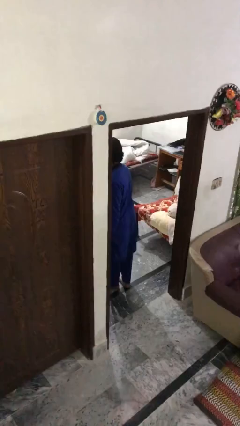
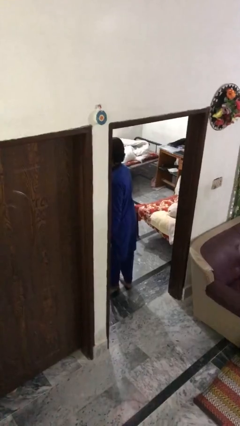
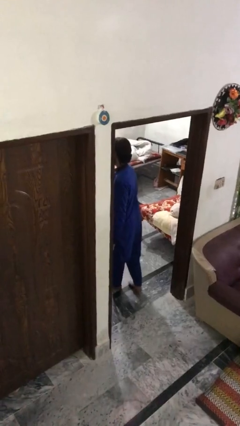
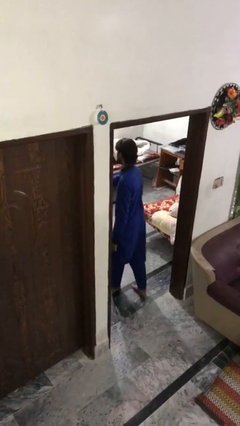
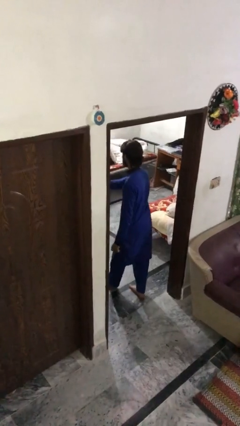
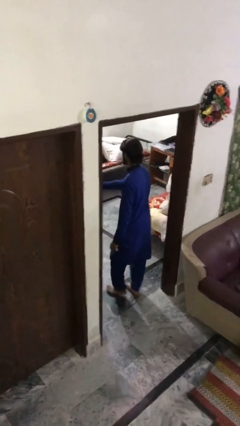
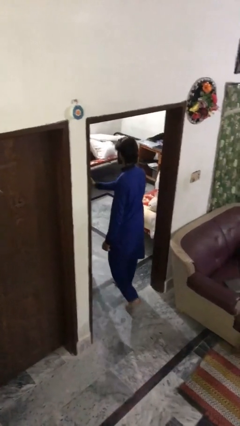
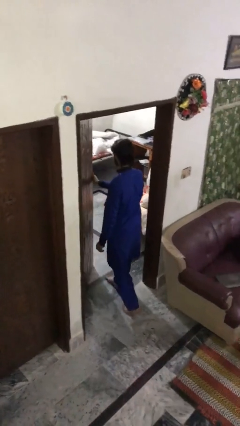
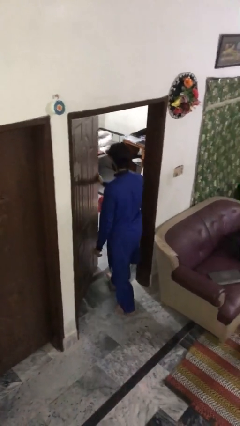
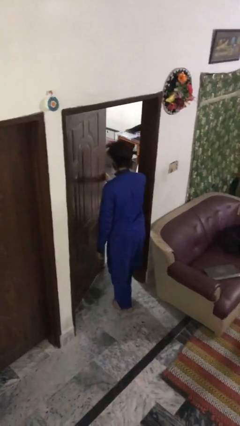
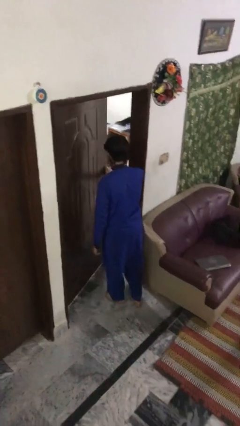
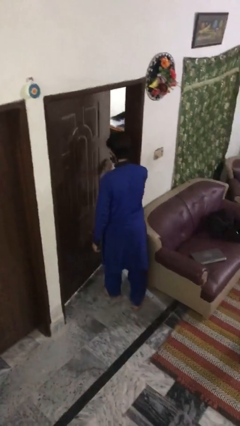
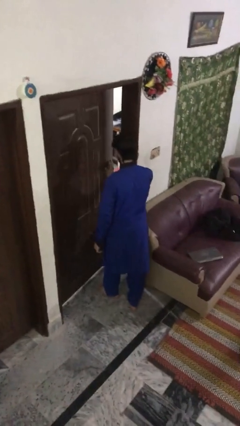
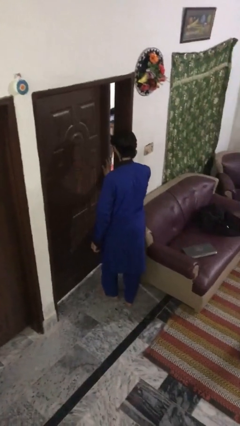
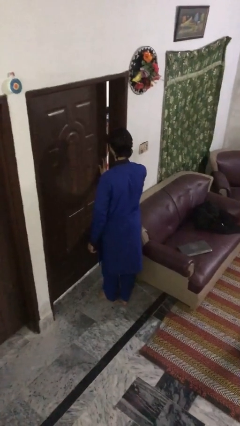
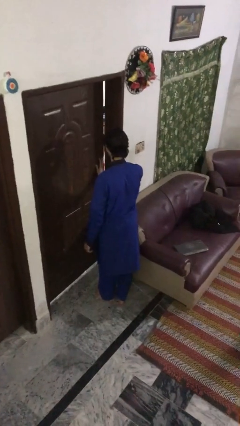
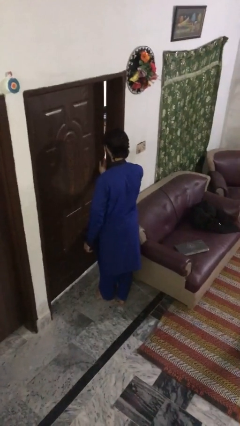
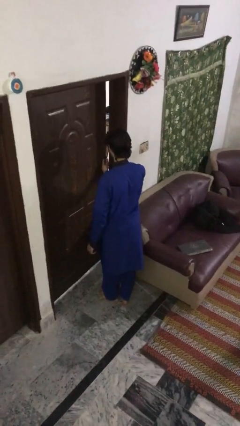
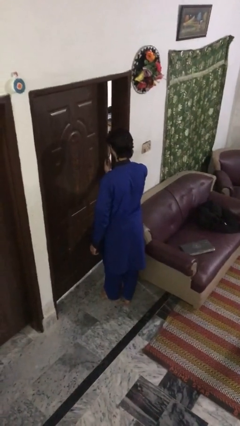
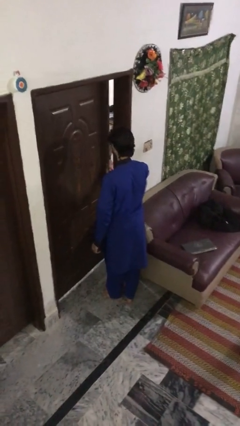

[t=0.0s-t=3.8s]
person closes facility door

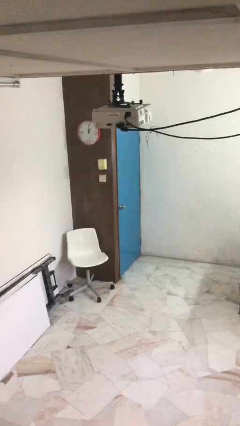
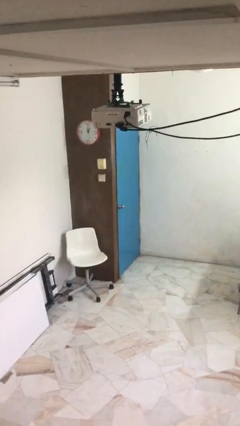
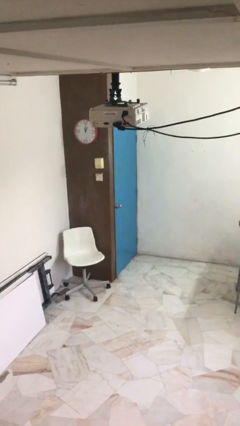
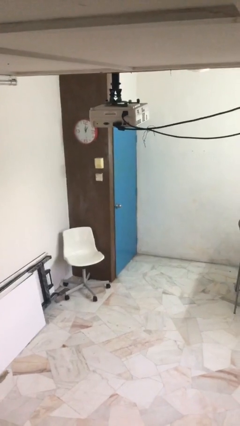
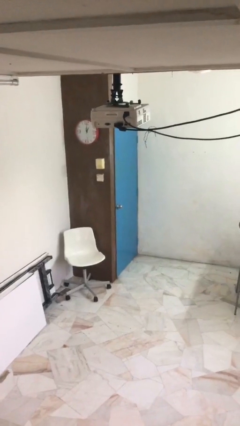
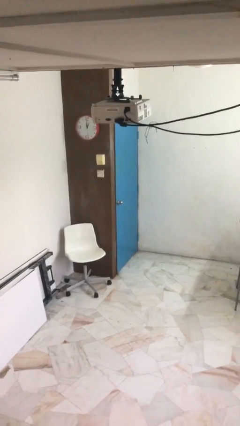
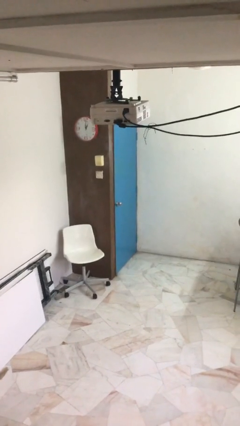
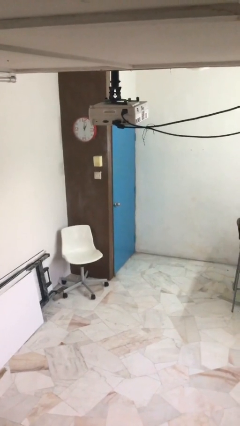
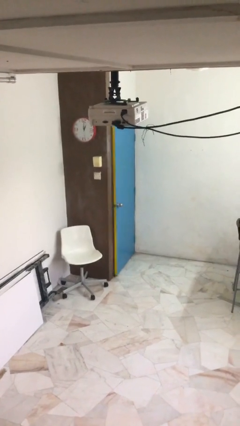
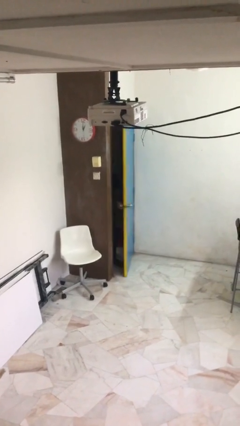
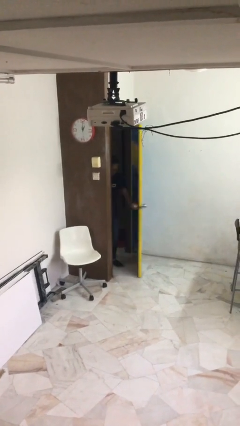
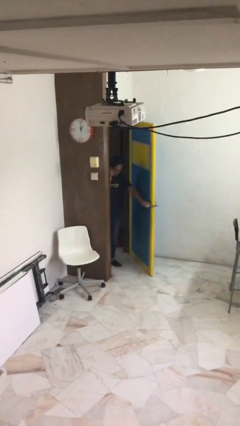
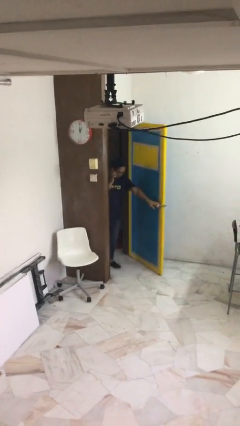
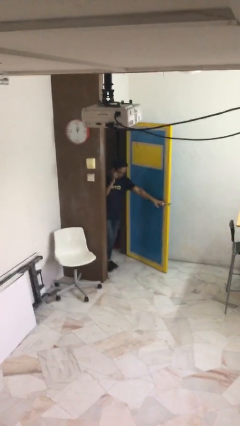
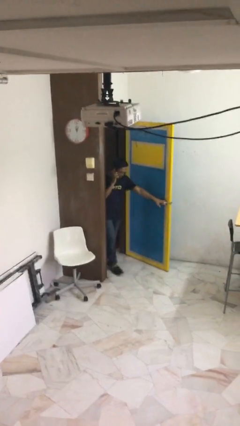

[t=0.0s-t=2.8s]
person opens facility door

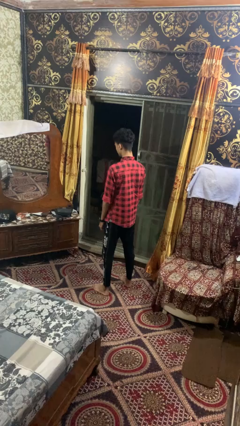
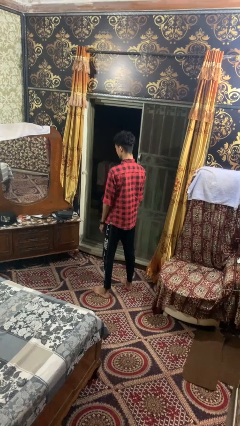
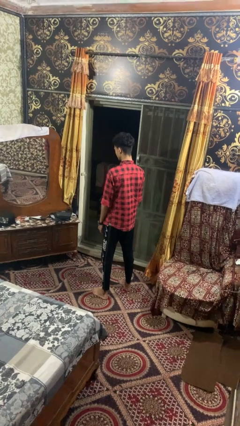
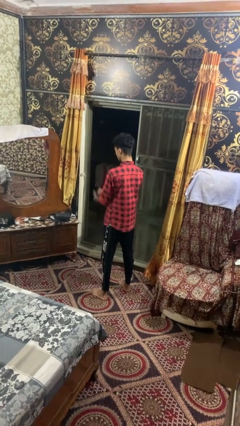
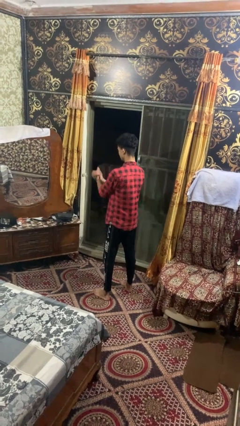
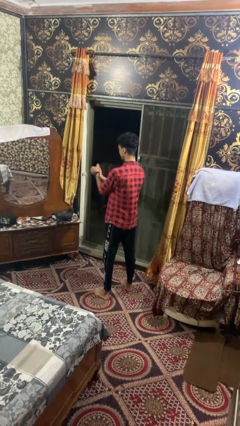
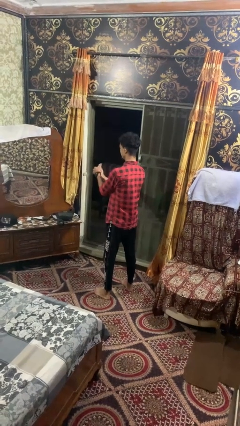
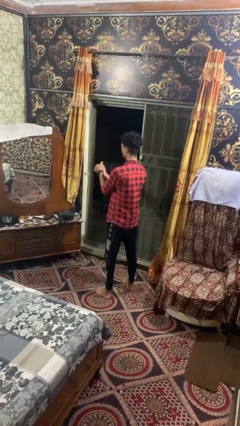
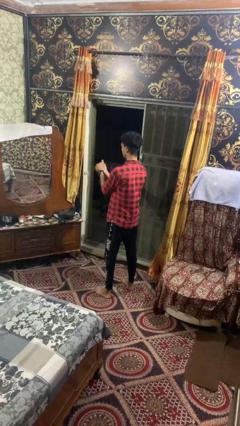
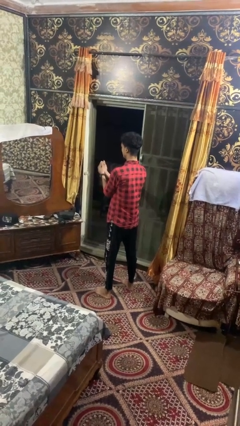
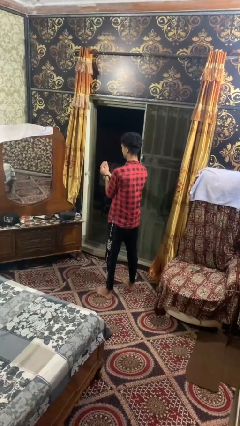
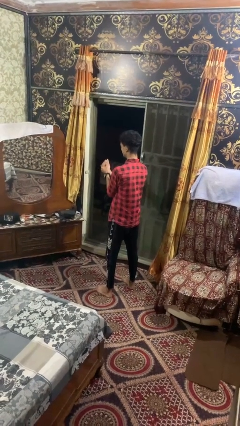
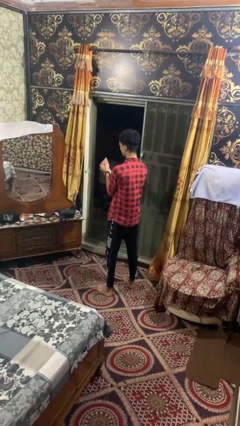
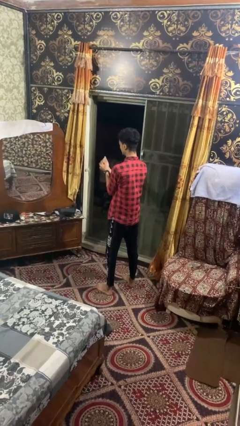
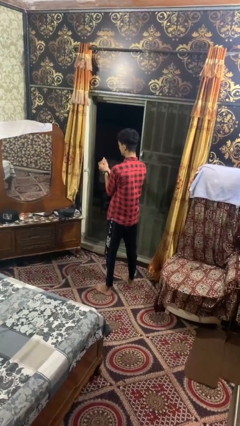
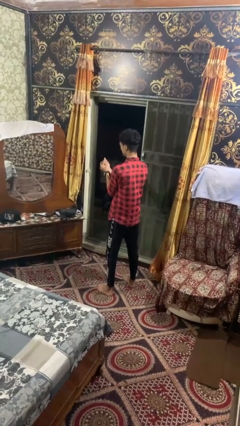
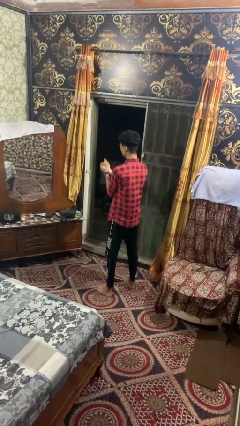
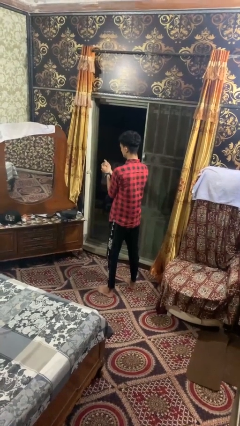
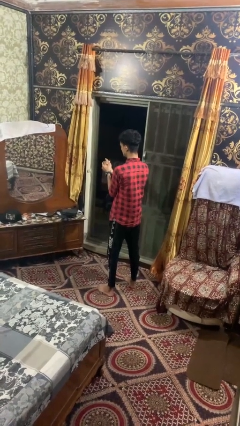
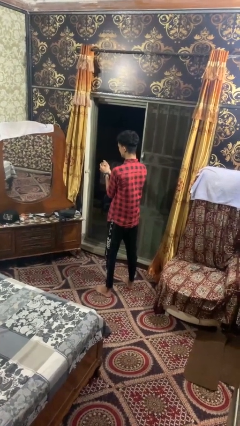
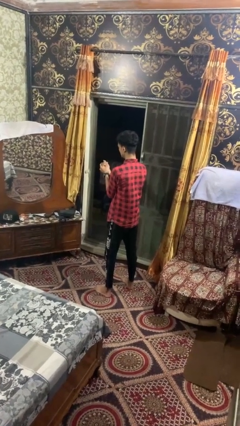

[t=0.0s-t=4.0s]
person cracks knuckles

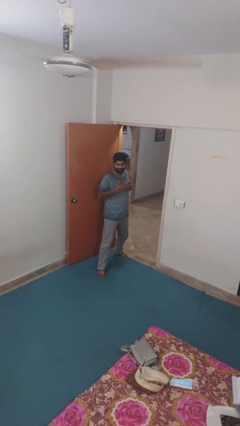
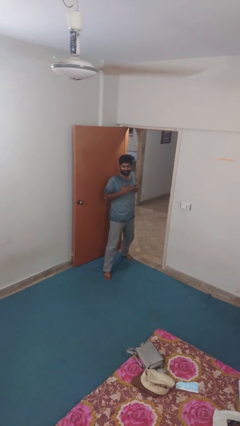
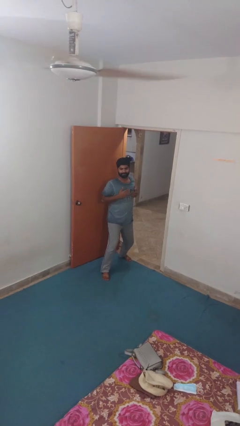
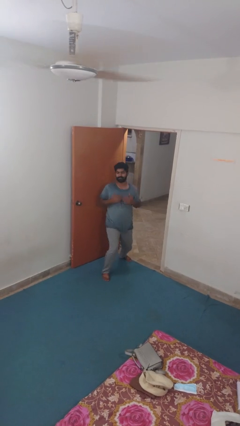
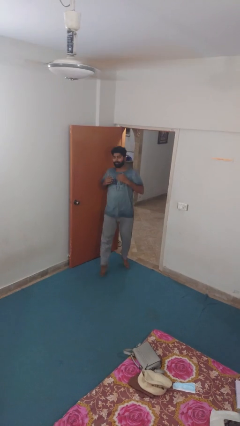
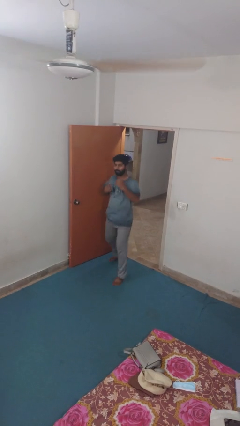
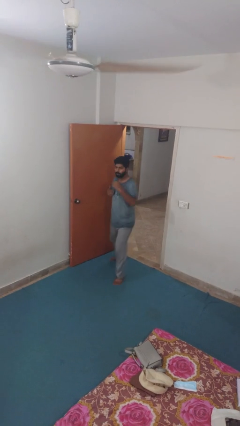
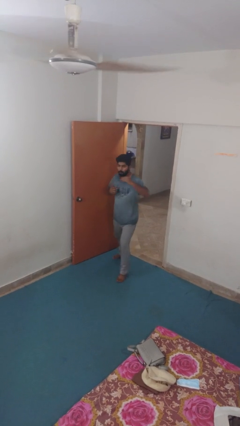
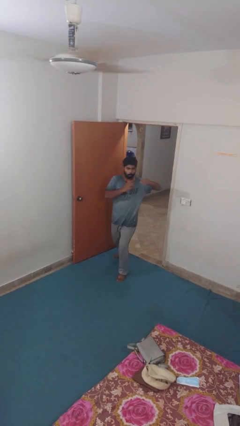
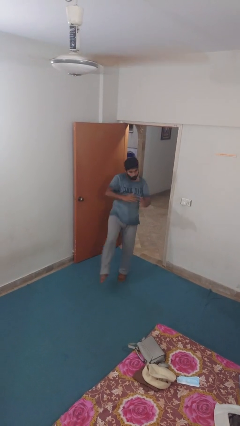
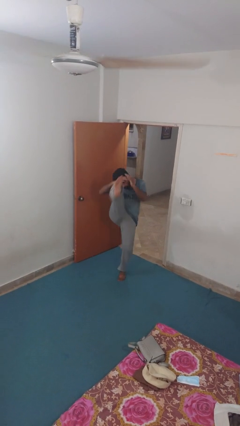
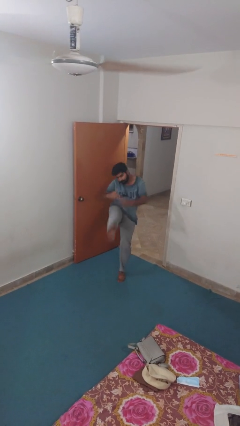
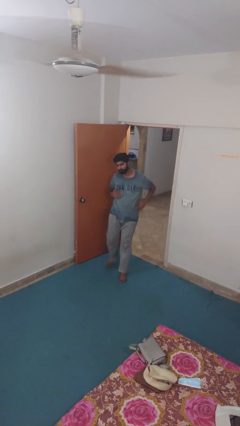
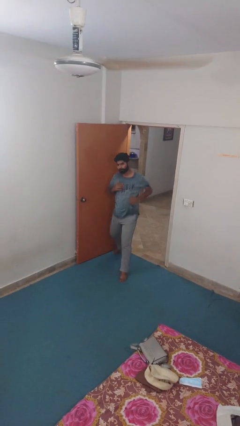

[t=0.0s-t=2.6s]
person karate kicks

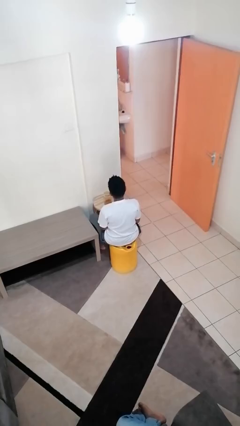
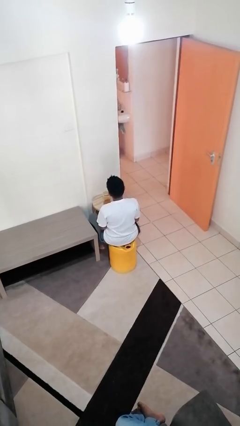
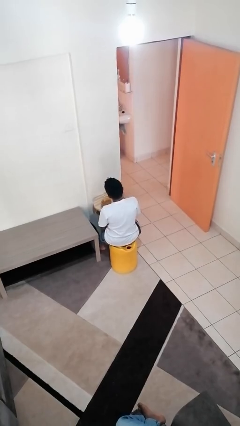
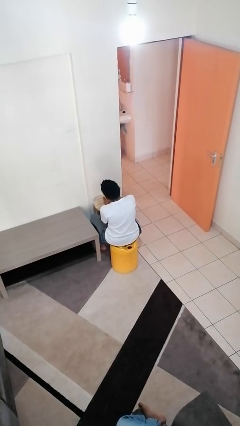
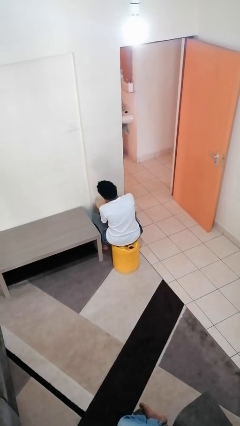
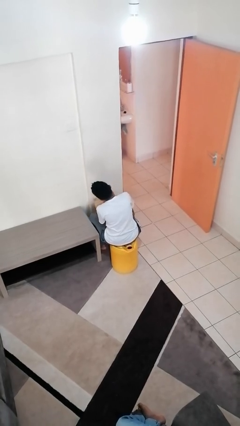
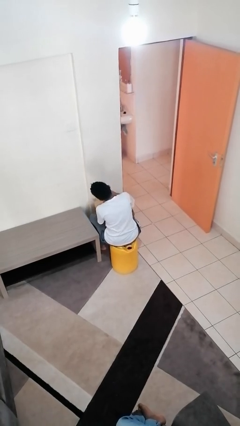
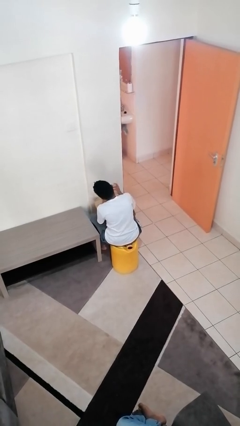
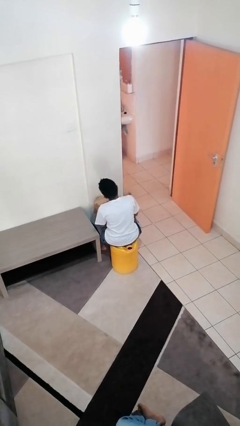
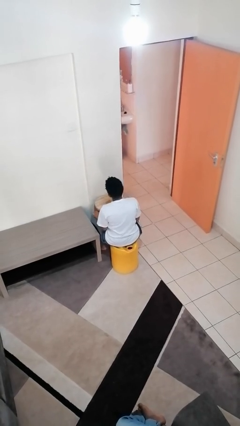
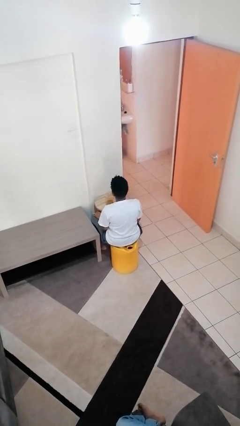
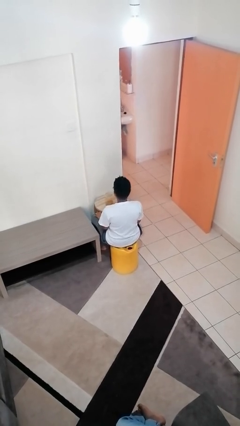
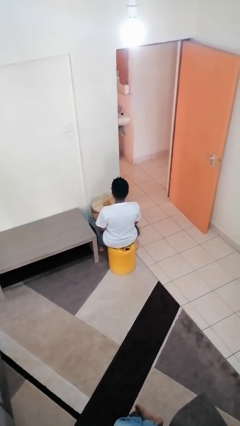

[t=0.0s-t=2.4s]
person opens jar

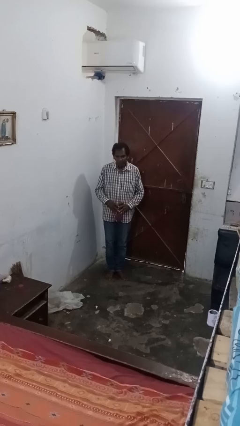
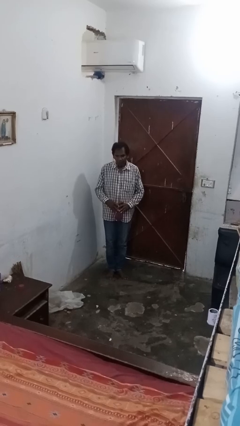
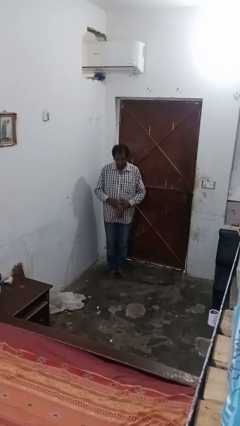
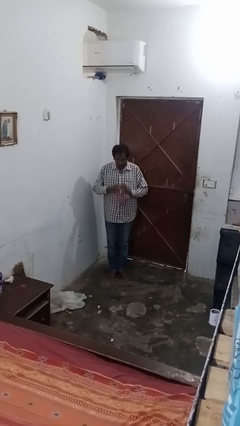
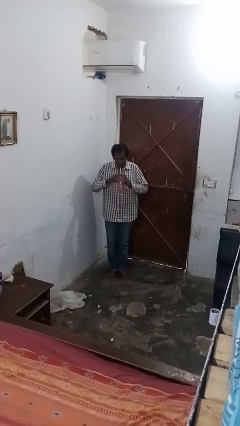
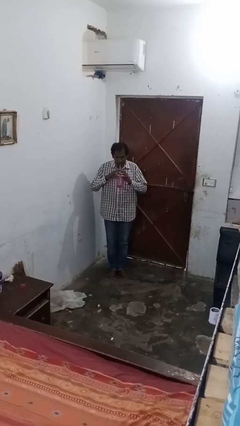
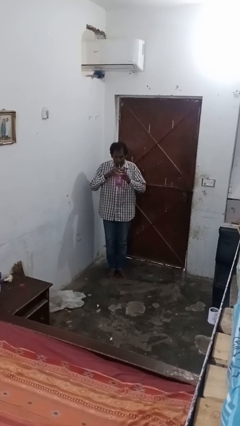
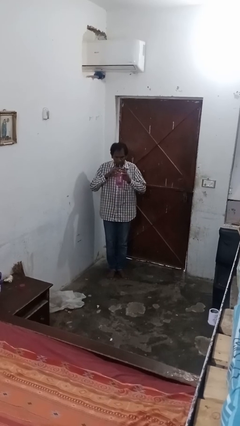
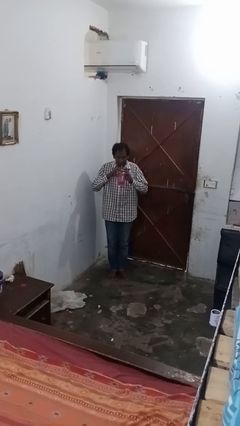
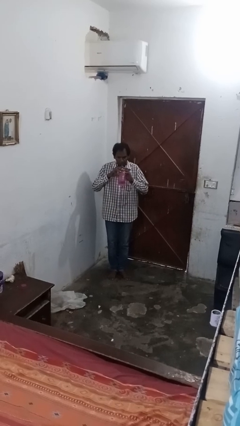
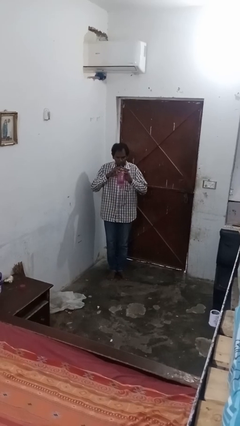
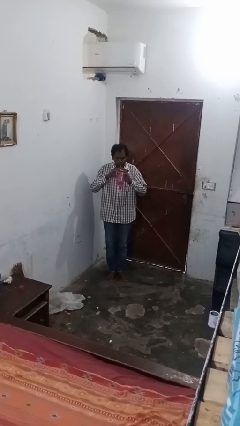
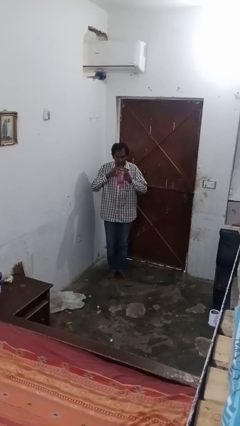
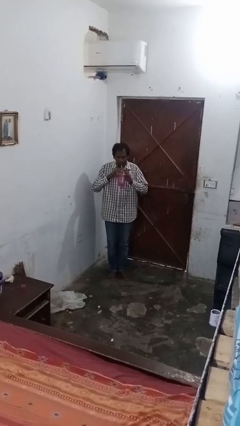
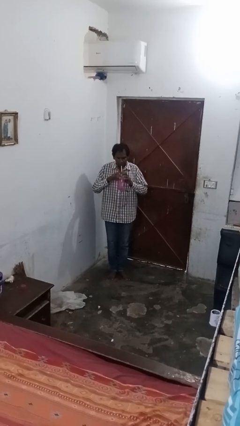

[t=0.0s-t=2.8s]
person drinks from straw
